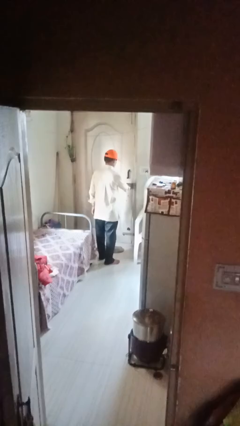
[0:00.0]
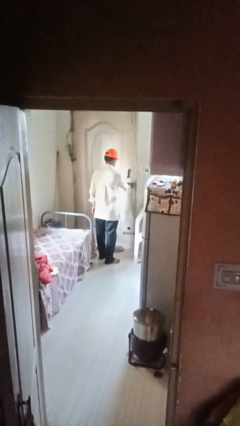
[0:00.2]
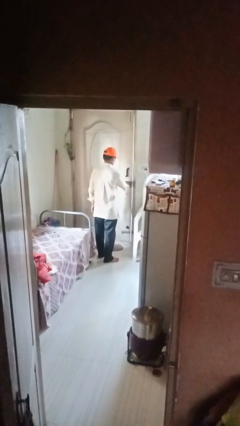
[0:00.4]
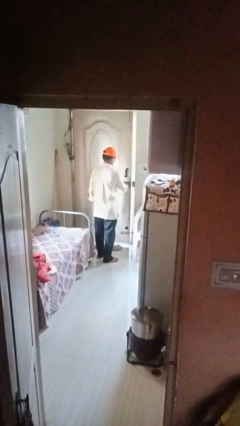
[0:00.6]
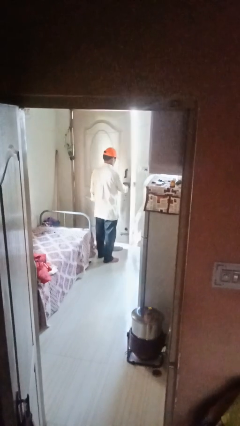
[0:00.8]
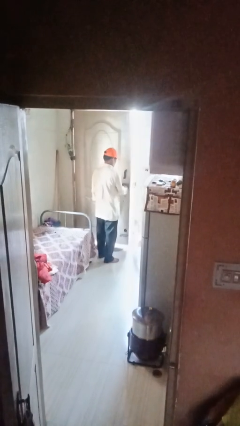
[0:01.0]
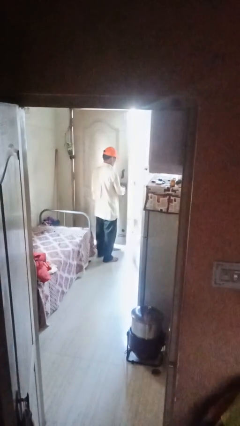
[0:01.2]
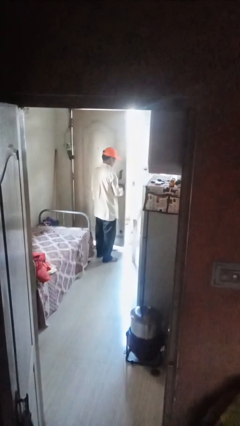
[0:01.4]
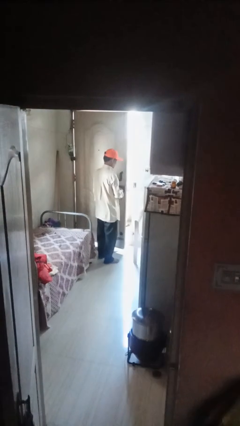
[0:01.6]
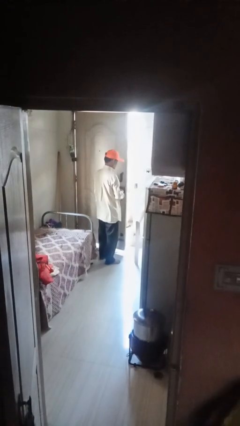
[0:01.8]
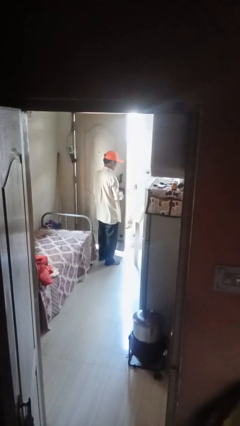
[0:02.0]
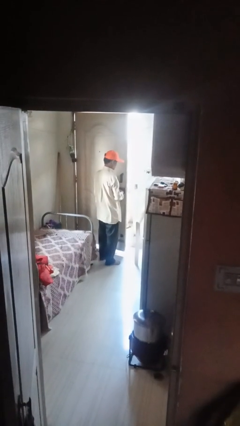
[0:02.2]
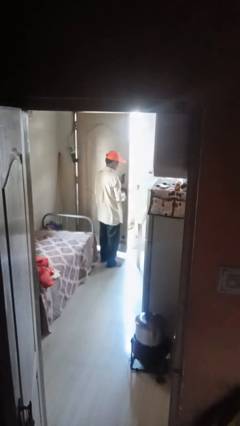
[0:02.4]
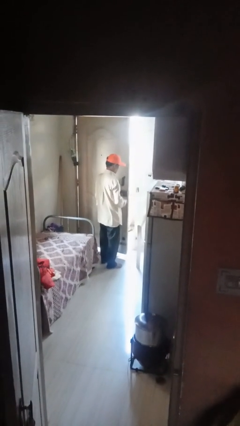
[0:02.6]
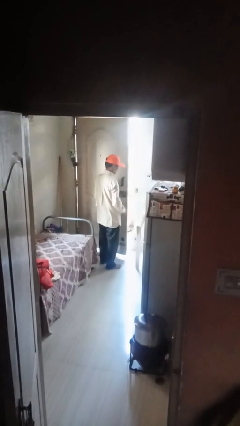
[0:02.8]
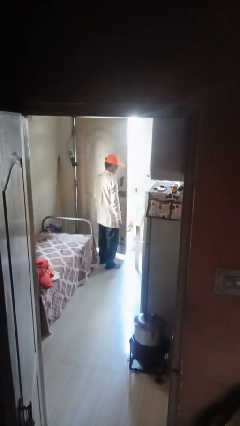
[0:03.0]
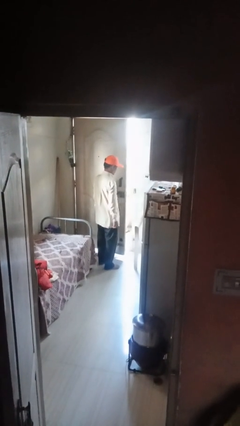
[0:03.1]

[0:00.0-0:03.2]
person opens facility door

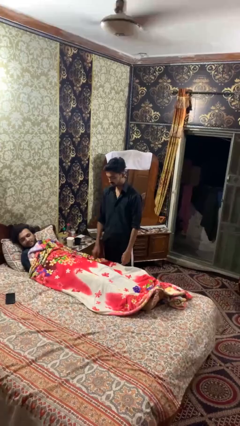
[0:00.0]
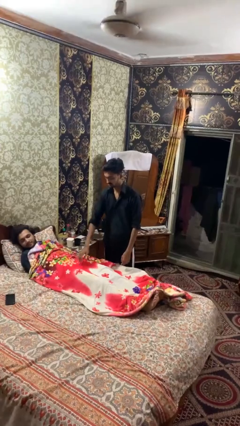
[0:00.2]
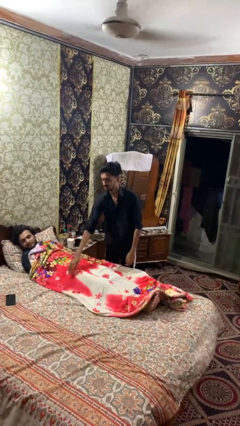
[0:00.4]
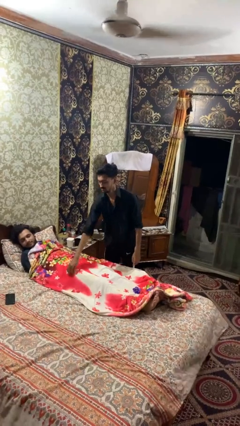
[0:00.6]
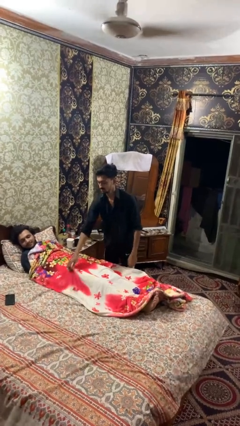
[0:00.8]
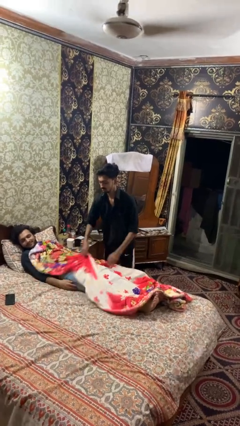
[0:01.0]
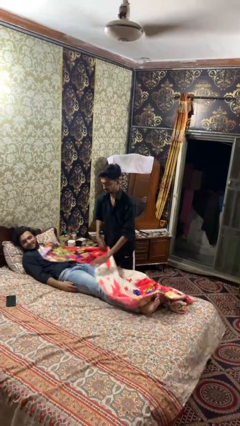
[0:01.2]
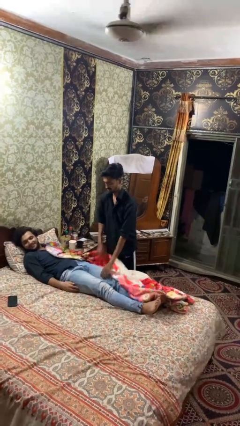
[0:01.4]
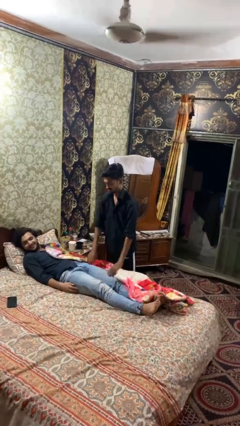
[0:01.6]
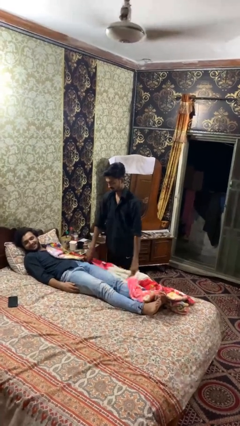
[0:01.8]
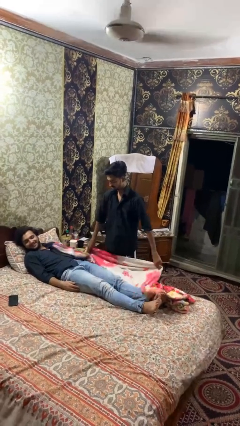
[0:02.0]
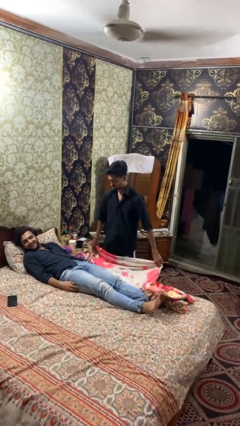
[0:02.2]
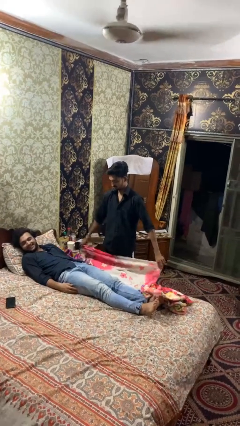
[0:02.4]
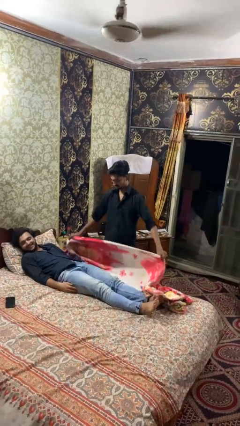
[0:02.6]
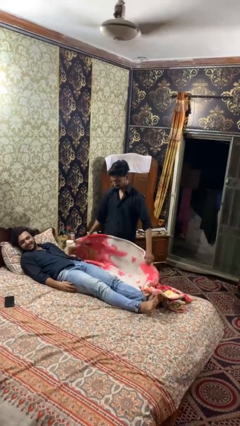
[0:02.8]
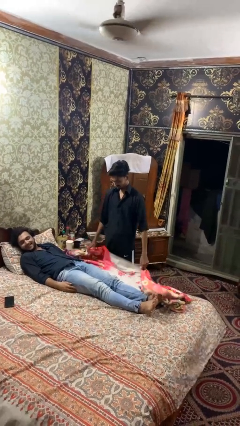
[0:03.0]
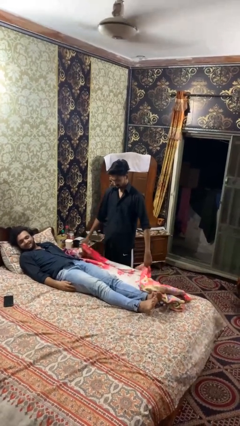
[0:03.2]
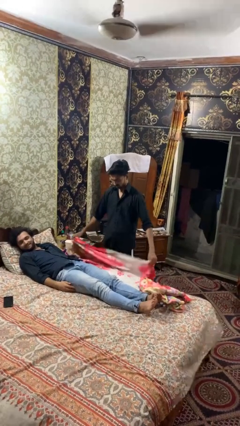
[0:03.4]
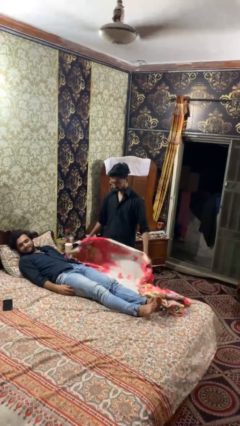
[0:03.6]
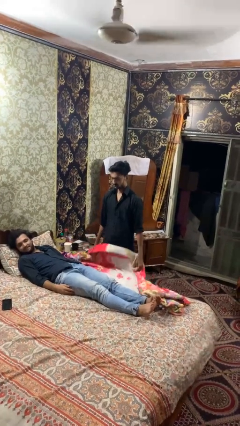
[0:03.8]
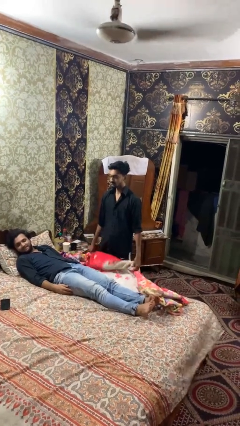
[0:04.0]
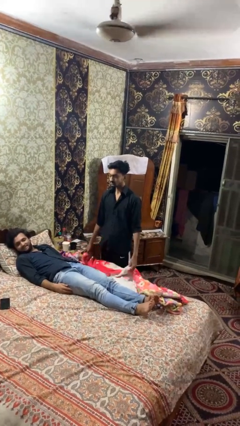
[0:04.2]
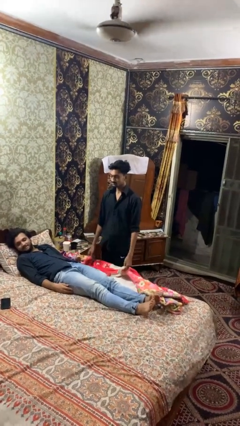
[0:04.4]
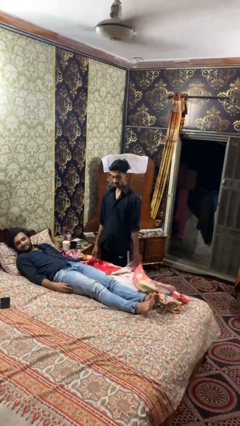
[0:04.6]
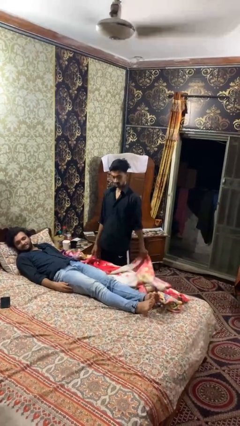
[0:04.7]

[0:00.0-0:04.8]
person uncovers friend with blanket

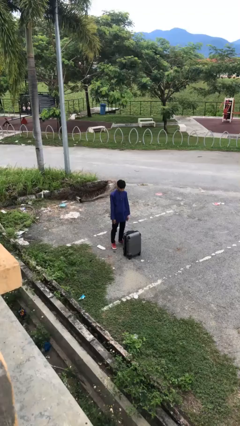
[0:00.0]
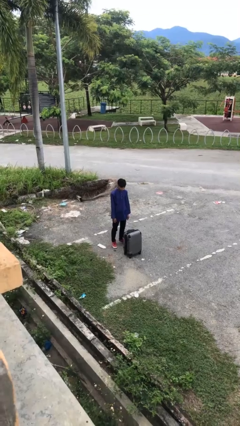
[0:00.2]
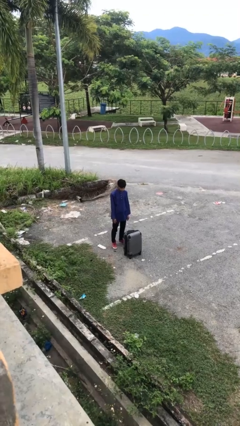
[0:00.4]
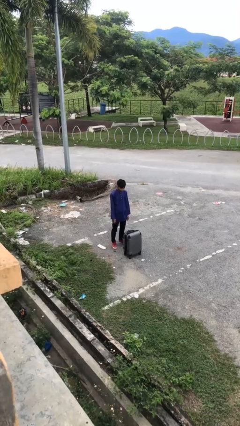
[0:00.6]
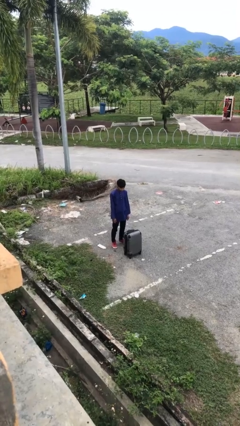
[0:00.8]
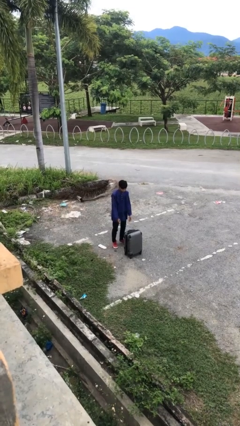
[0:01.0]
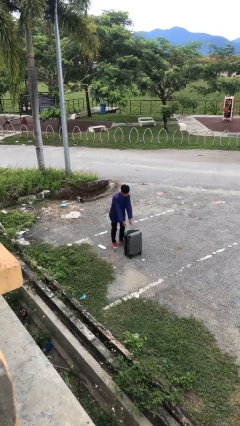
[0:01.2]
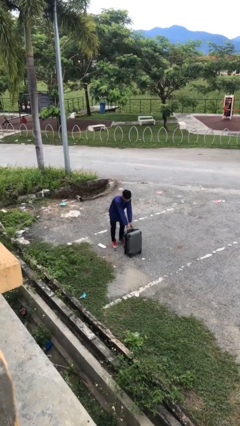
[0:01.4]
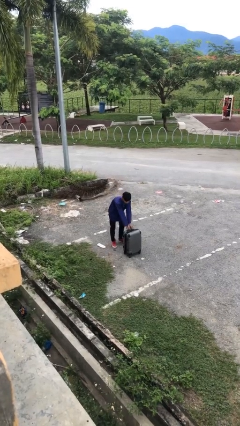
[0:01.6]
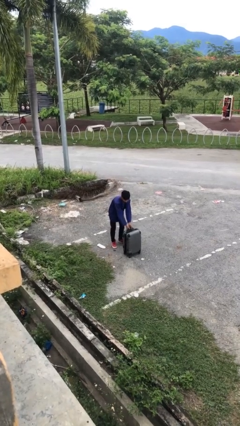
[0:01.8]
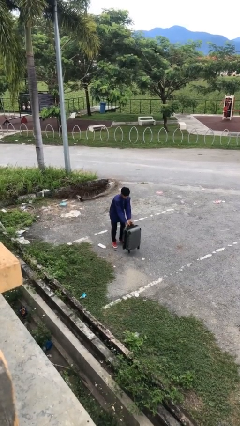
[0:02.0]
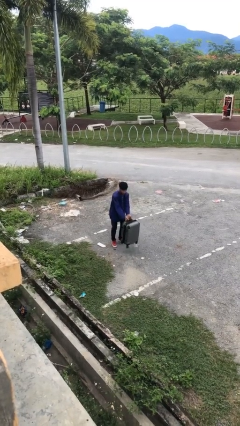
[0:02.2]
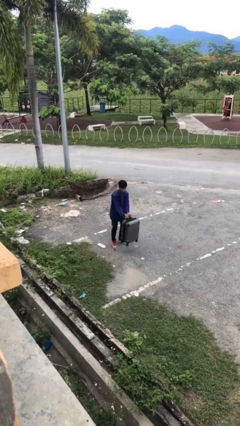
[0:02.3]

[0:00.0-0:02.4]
person picks up object from floor

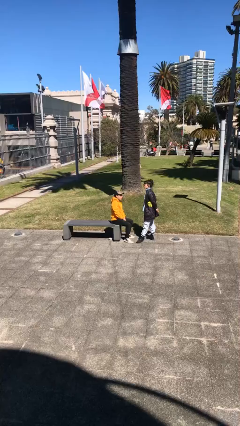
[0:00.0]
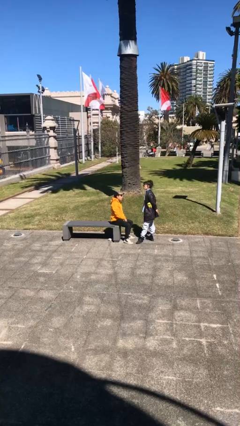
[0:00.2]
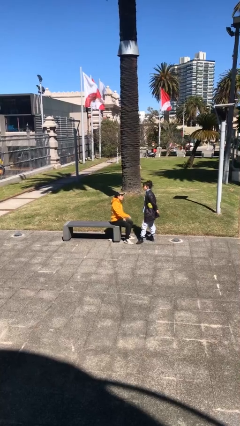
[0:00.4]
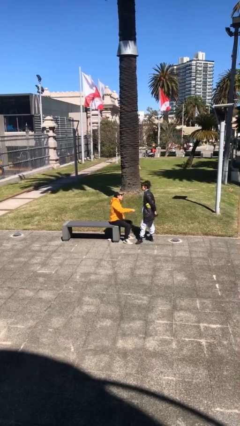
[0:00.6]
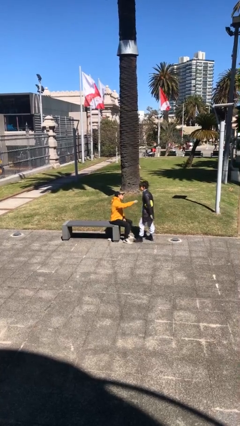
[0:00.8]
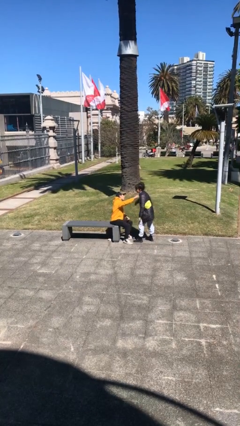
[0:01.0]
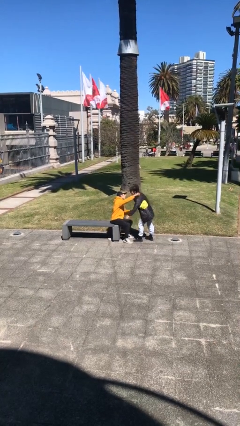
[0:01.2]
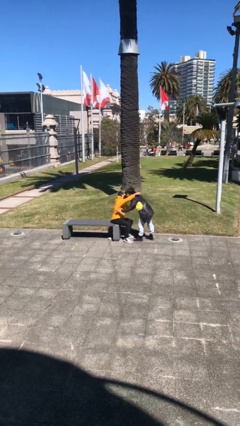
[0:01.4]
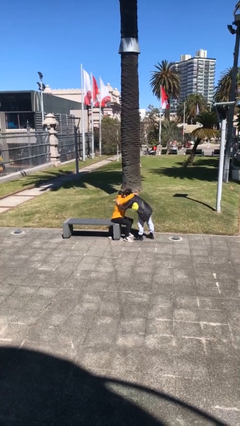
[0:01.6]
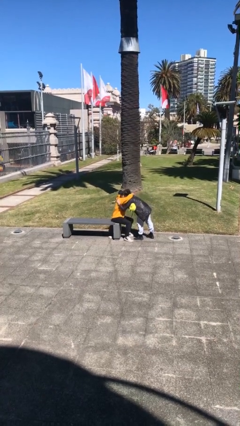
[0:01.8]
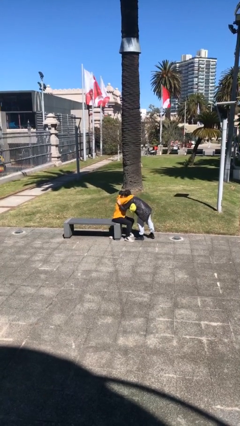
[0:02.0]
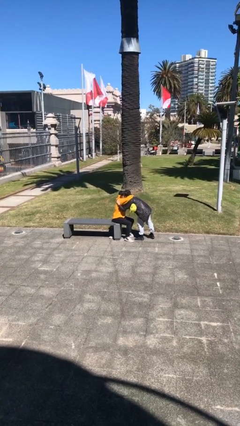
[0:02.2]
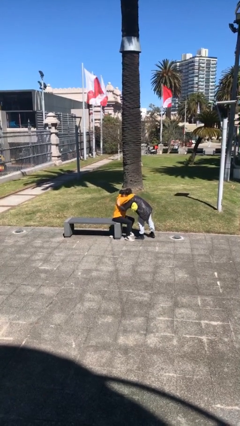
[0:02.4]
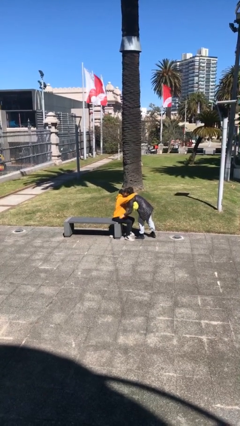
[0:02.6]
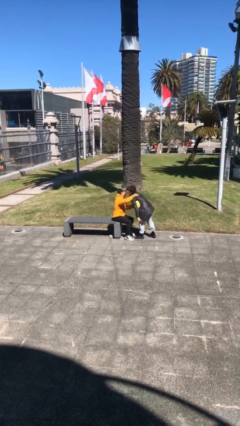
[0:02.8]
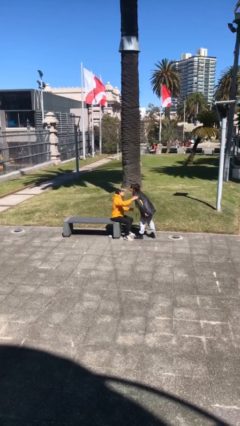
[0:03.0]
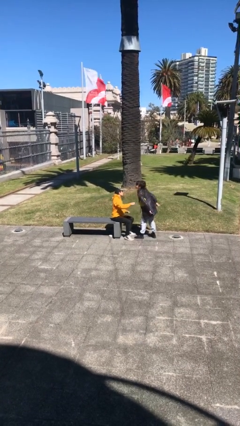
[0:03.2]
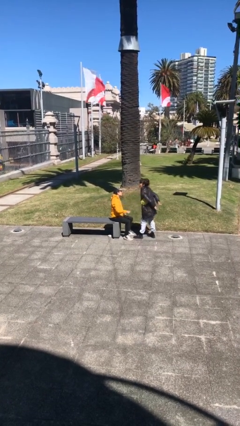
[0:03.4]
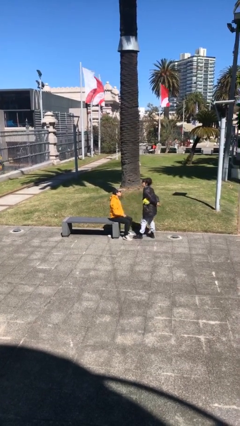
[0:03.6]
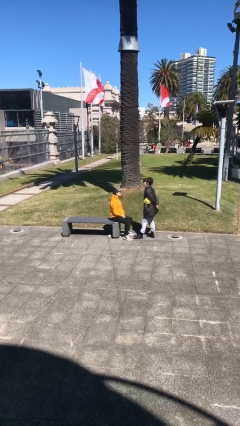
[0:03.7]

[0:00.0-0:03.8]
person embraces person

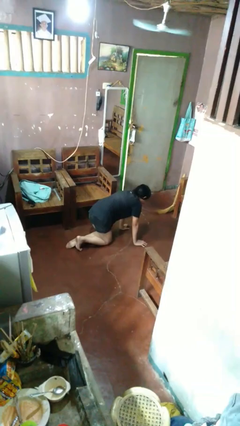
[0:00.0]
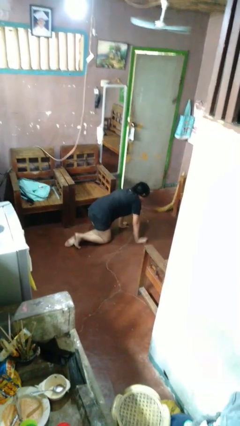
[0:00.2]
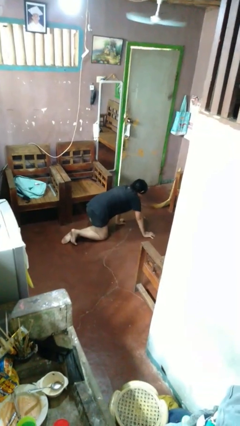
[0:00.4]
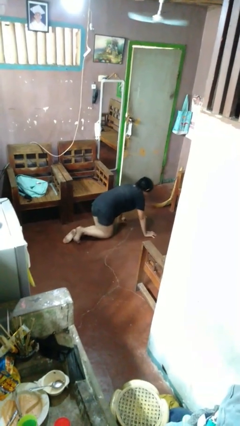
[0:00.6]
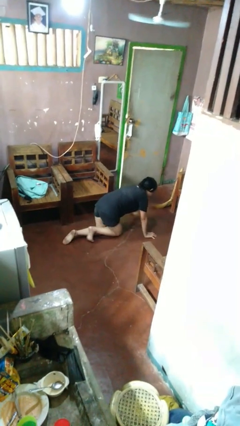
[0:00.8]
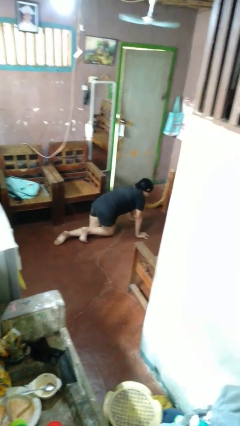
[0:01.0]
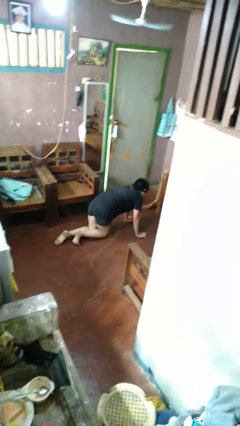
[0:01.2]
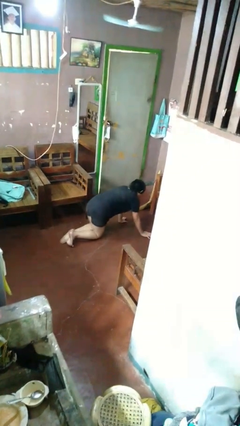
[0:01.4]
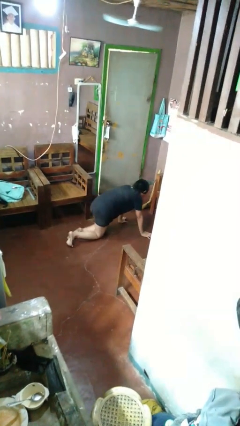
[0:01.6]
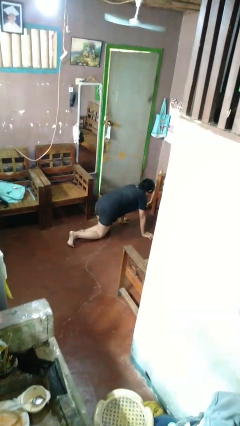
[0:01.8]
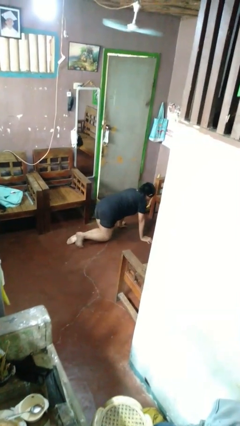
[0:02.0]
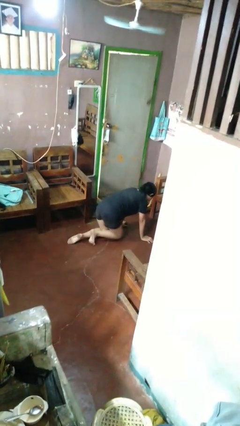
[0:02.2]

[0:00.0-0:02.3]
person crawls

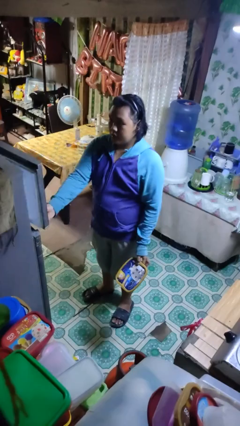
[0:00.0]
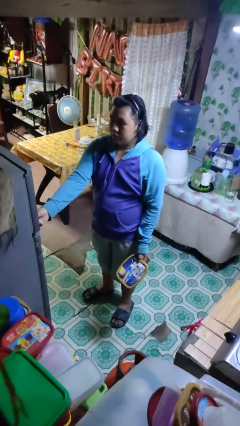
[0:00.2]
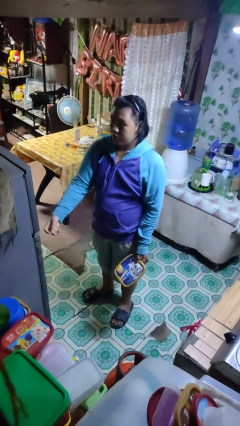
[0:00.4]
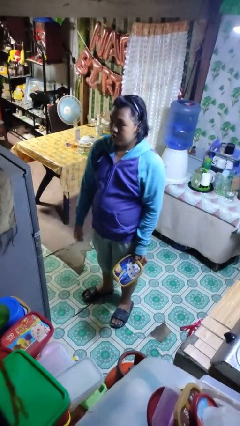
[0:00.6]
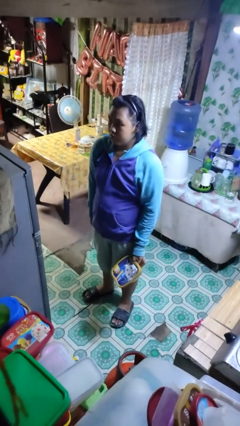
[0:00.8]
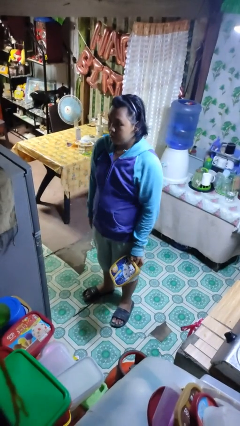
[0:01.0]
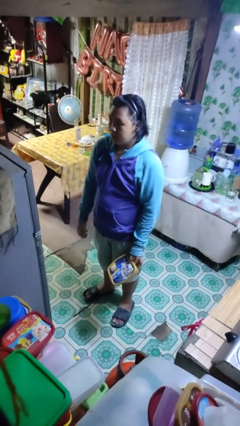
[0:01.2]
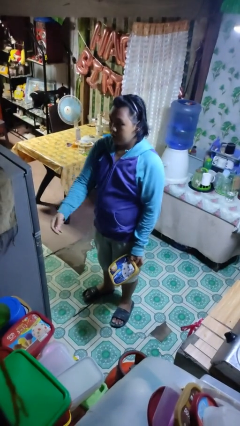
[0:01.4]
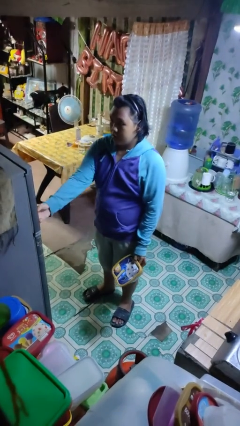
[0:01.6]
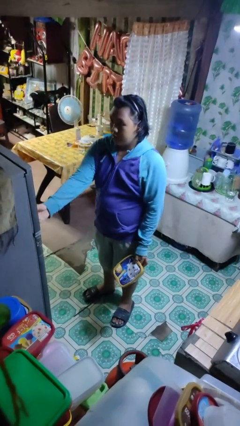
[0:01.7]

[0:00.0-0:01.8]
person closes refrigerator
